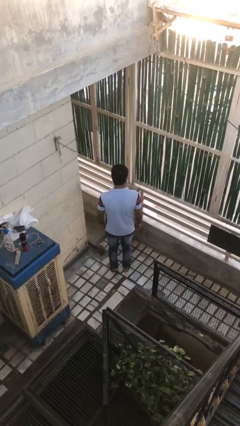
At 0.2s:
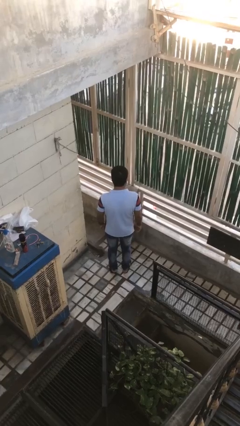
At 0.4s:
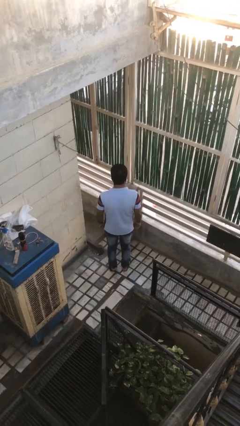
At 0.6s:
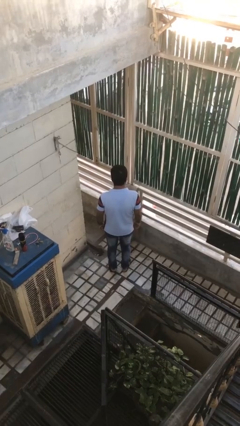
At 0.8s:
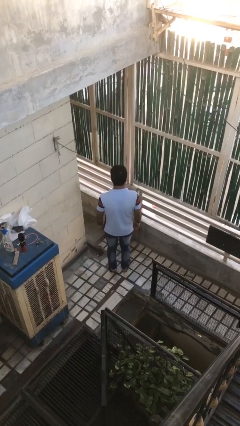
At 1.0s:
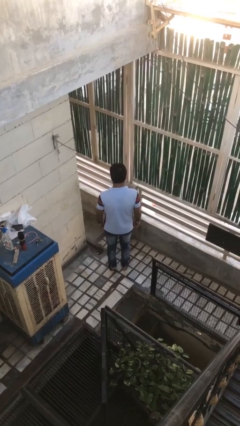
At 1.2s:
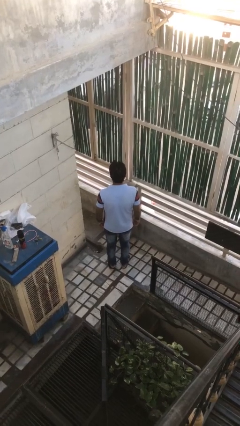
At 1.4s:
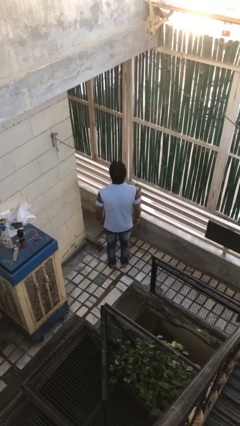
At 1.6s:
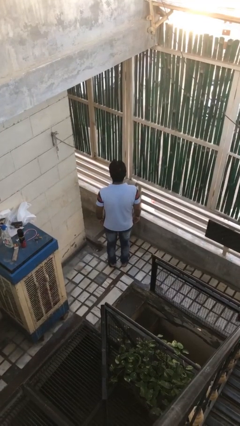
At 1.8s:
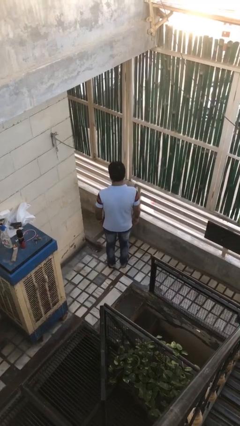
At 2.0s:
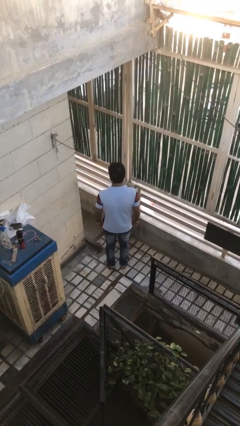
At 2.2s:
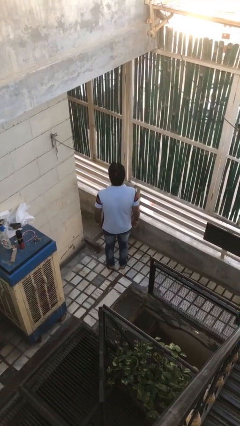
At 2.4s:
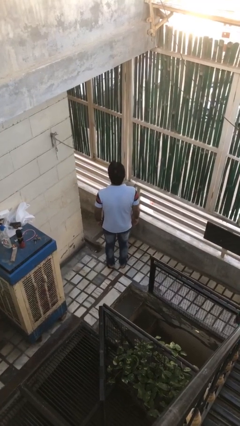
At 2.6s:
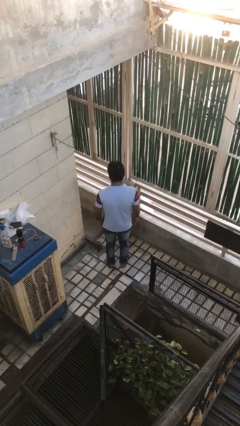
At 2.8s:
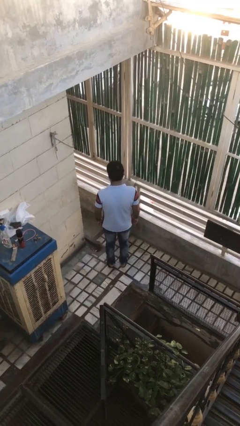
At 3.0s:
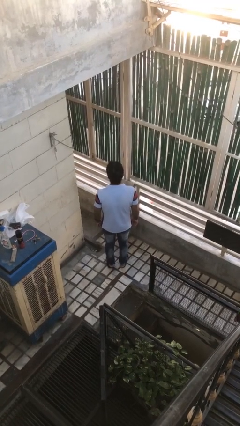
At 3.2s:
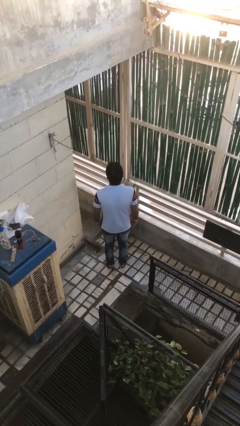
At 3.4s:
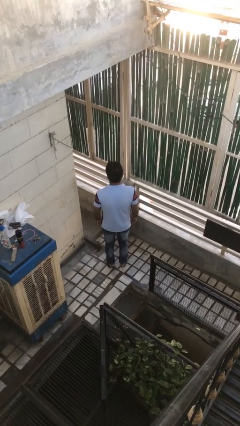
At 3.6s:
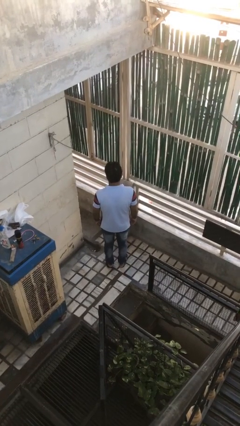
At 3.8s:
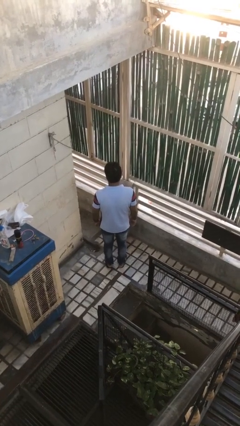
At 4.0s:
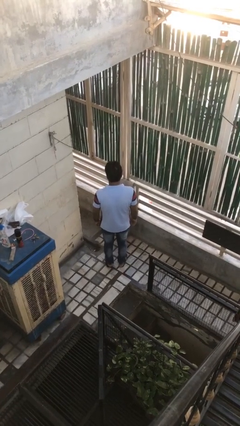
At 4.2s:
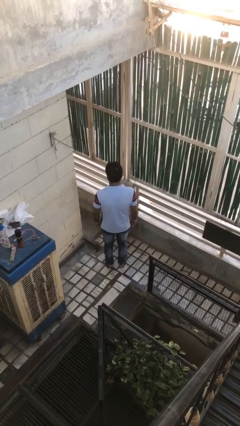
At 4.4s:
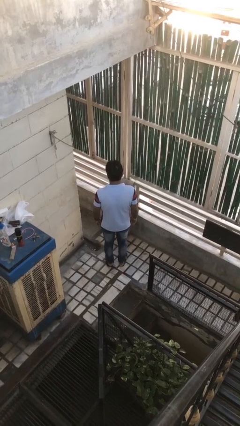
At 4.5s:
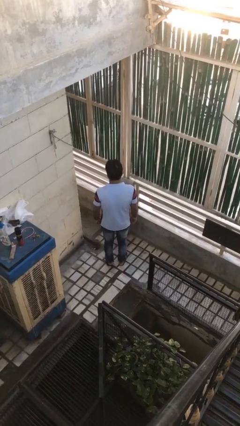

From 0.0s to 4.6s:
person nods head

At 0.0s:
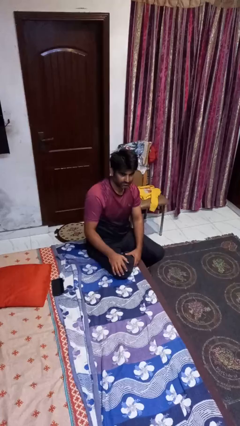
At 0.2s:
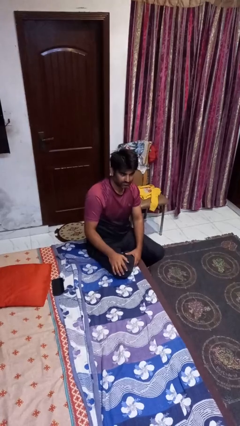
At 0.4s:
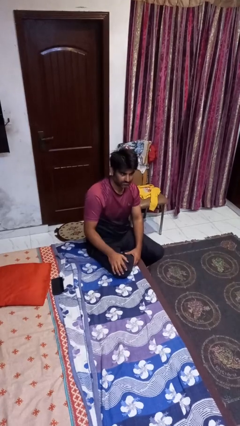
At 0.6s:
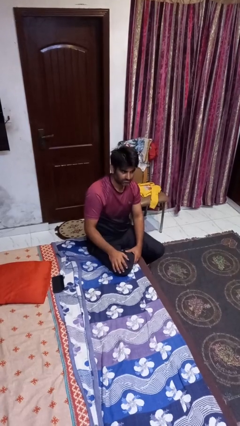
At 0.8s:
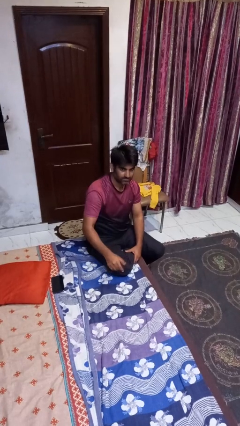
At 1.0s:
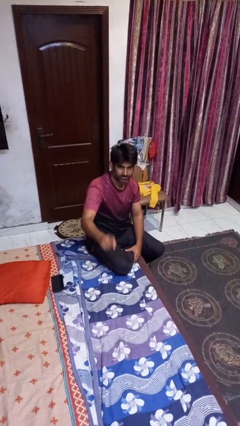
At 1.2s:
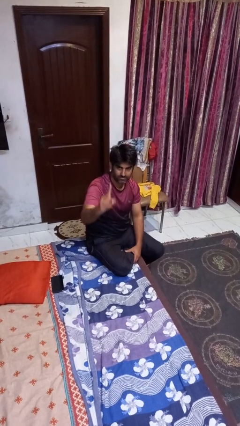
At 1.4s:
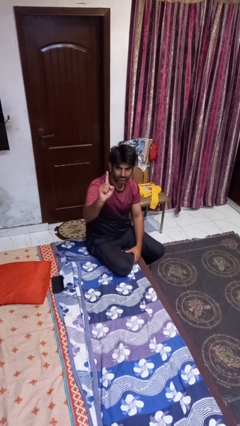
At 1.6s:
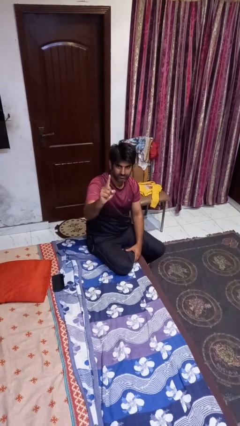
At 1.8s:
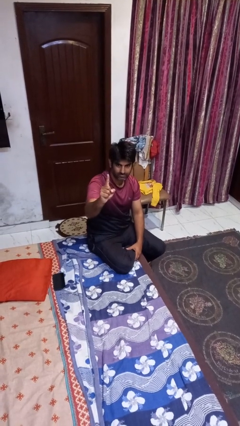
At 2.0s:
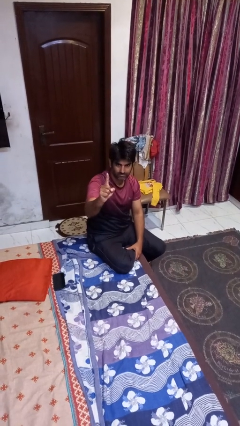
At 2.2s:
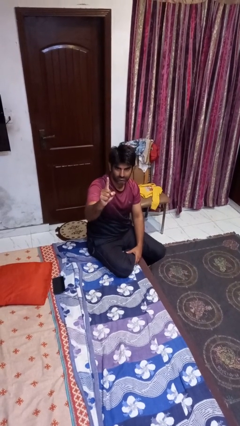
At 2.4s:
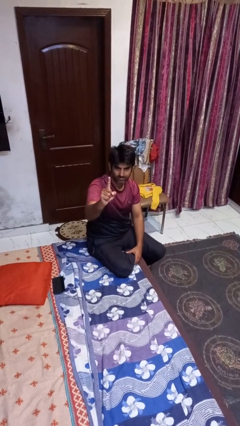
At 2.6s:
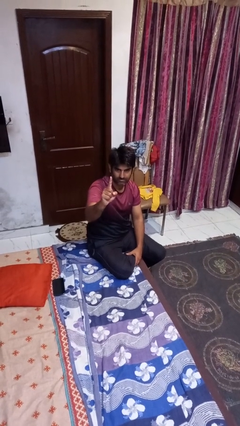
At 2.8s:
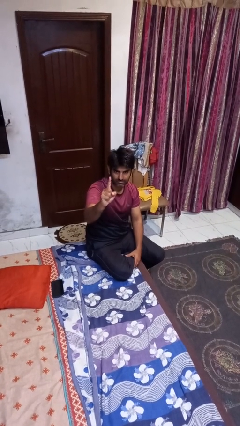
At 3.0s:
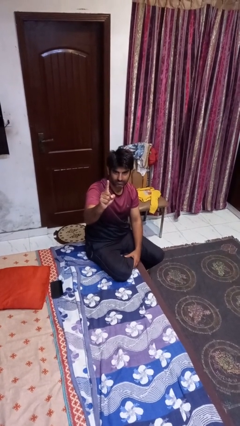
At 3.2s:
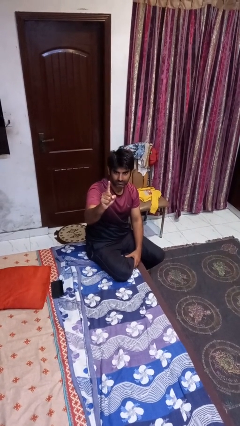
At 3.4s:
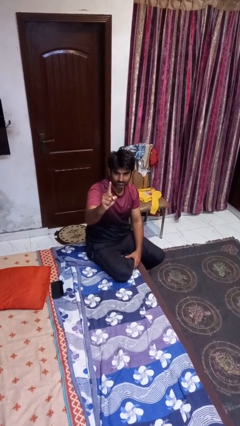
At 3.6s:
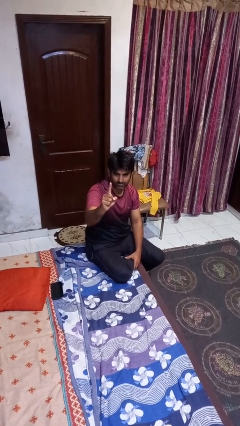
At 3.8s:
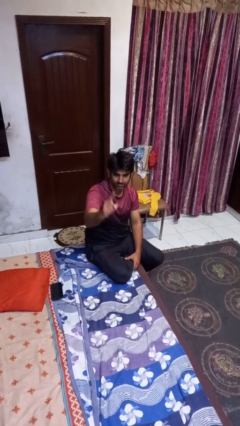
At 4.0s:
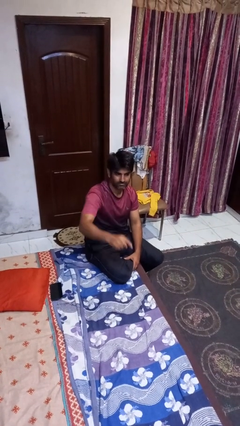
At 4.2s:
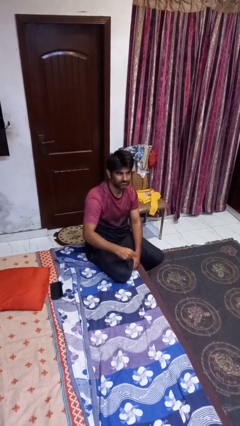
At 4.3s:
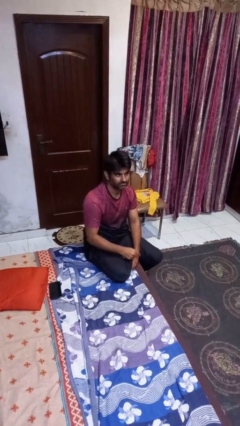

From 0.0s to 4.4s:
person gestures number one

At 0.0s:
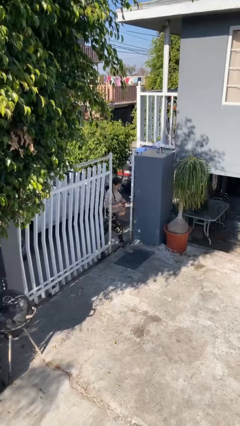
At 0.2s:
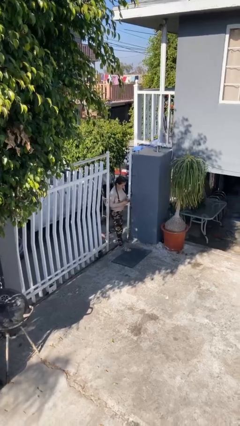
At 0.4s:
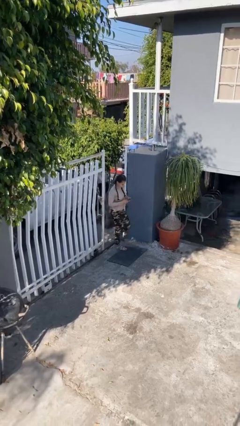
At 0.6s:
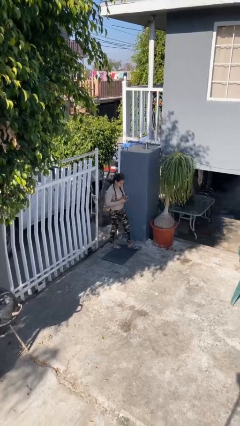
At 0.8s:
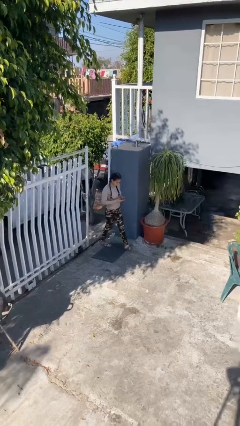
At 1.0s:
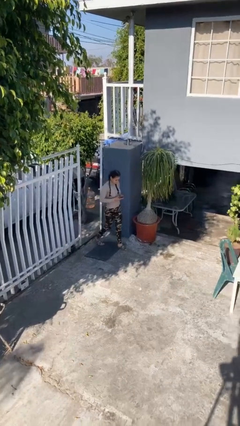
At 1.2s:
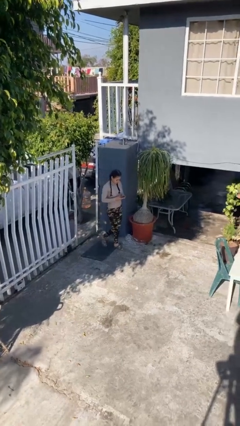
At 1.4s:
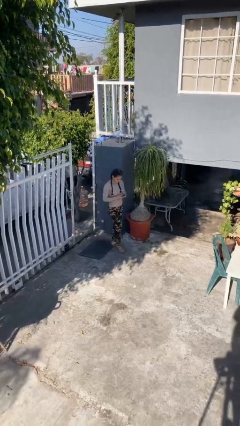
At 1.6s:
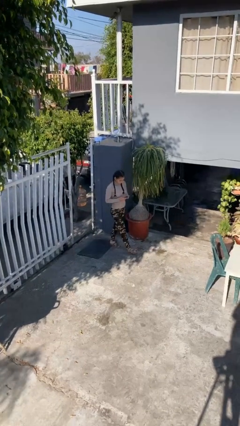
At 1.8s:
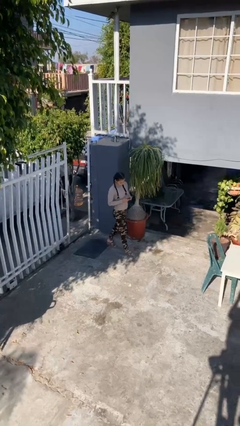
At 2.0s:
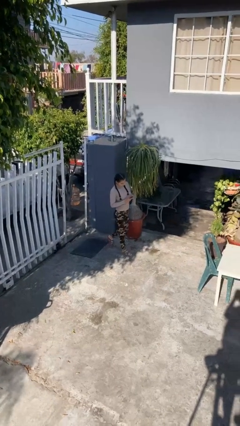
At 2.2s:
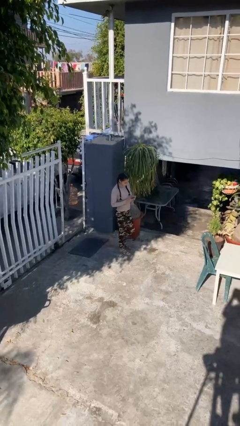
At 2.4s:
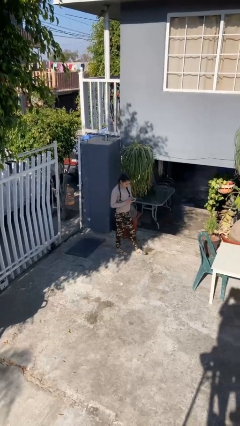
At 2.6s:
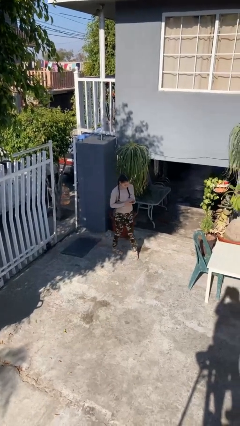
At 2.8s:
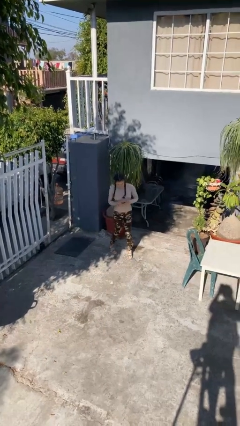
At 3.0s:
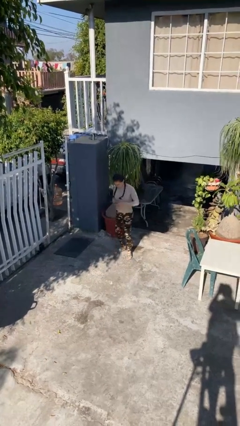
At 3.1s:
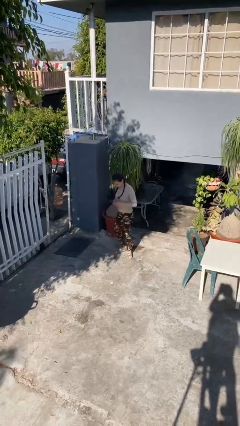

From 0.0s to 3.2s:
person enters scene through structure

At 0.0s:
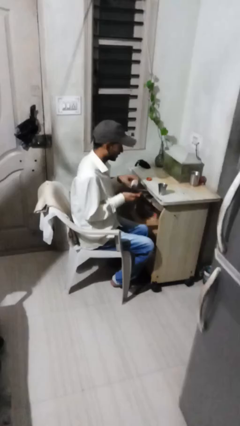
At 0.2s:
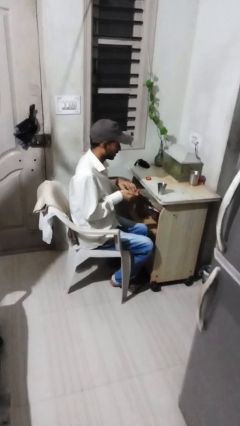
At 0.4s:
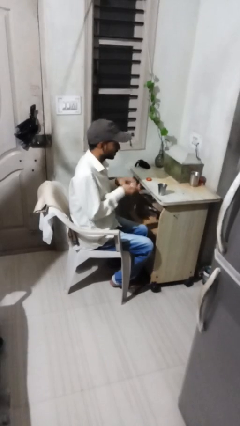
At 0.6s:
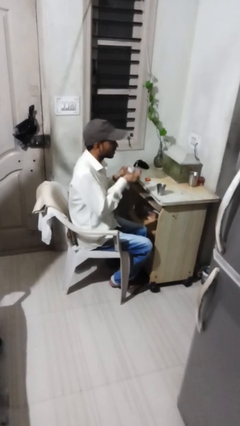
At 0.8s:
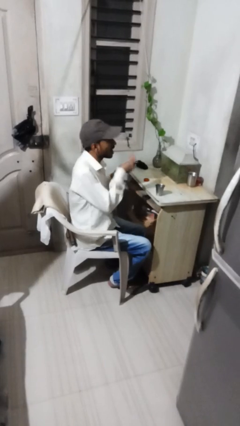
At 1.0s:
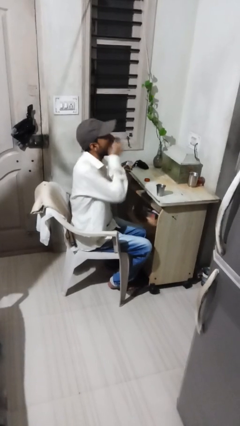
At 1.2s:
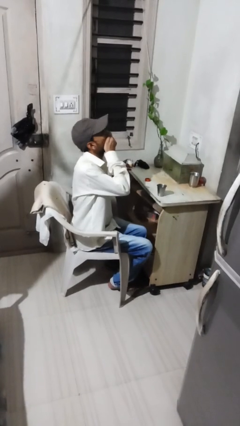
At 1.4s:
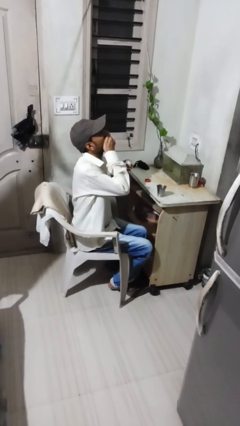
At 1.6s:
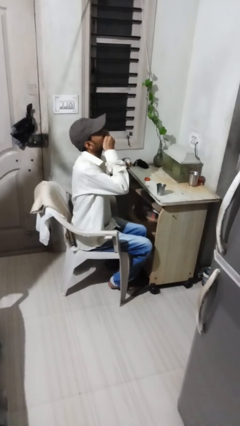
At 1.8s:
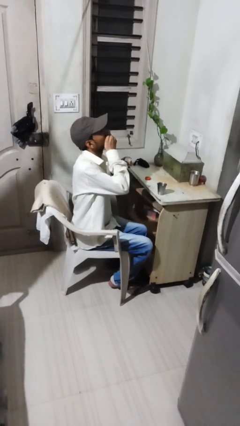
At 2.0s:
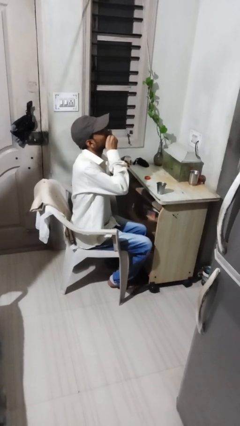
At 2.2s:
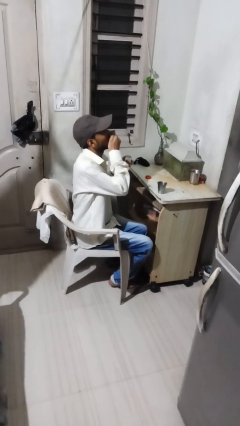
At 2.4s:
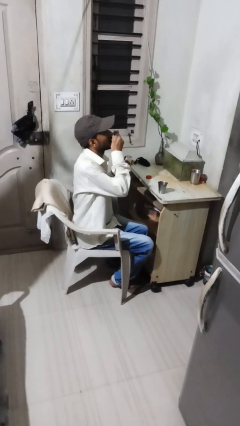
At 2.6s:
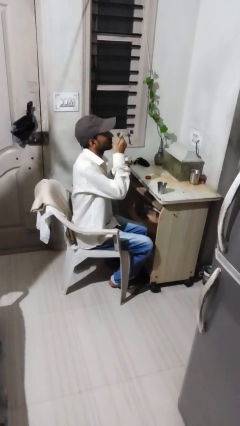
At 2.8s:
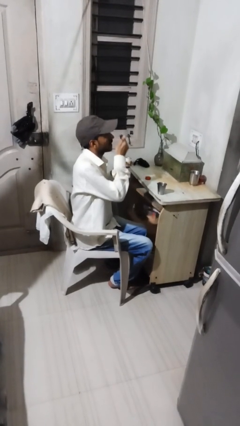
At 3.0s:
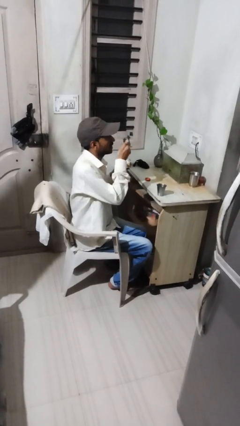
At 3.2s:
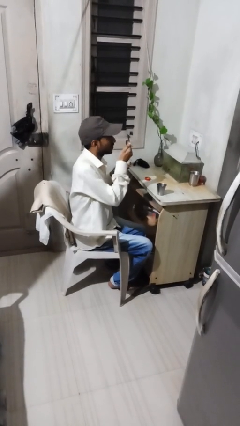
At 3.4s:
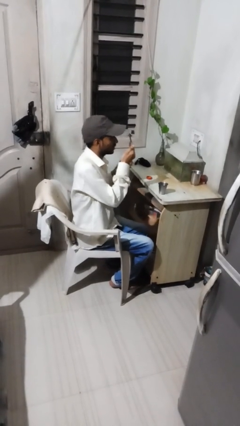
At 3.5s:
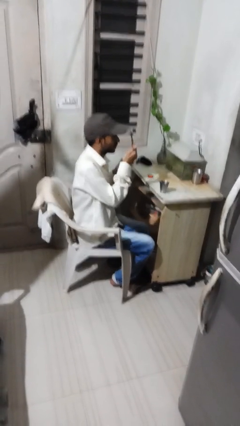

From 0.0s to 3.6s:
person takes medicine pills

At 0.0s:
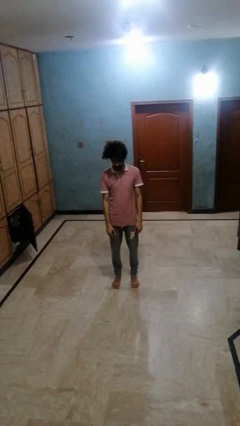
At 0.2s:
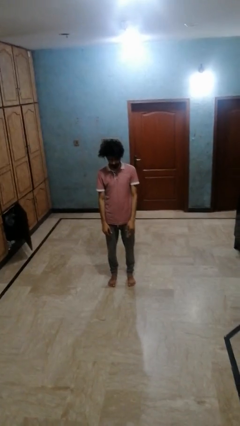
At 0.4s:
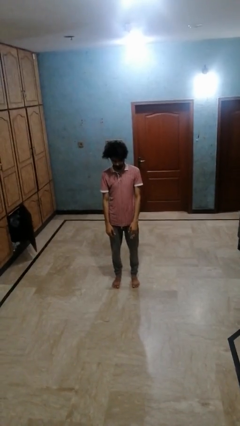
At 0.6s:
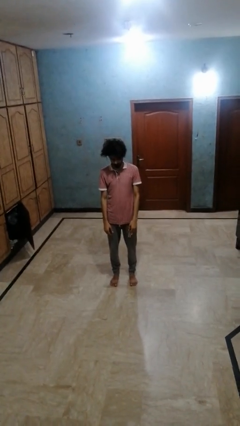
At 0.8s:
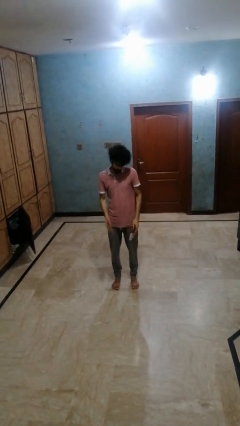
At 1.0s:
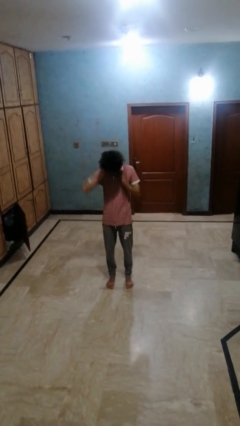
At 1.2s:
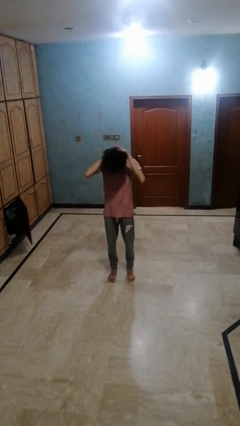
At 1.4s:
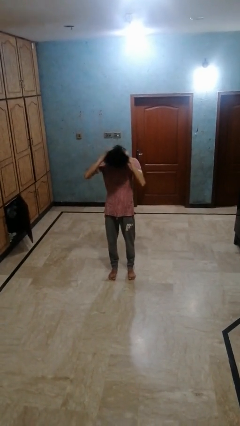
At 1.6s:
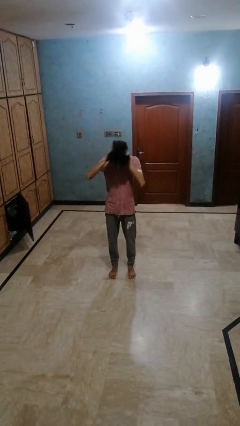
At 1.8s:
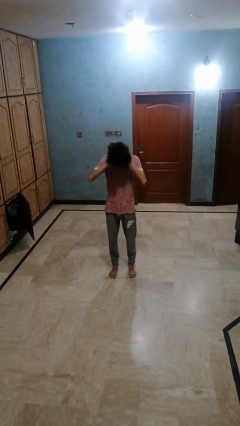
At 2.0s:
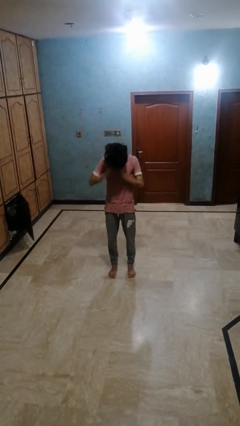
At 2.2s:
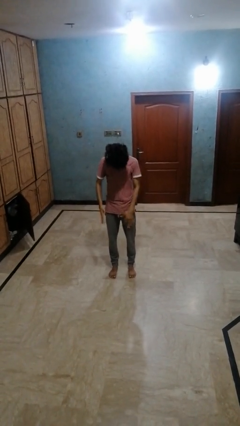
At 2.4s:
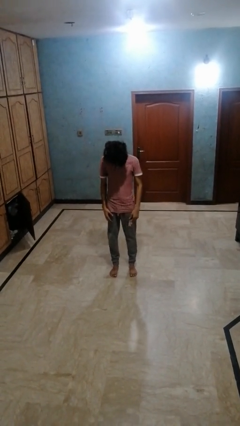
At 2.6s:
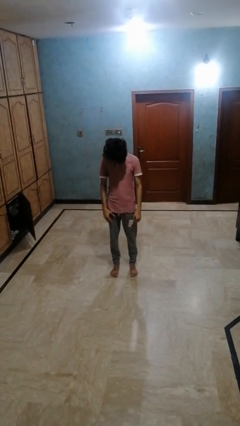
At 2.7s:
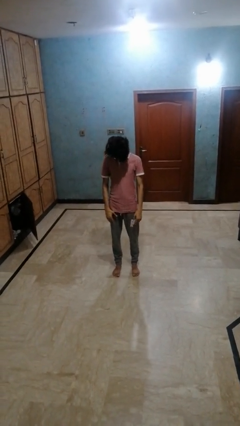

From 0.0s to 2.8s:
person rubs neck
